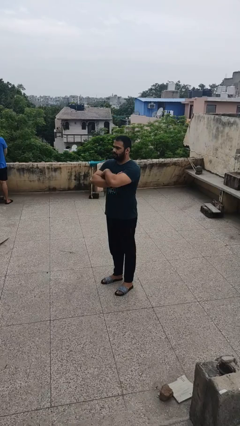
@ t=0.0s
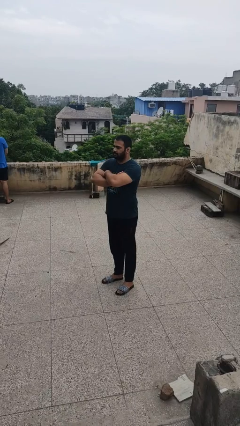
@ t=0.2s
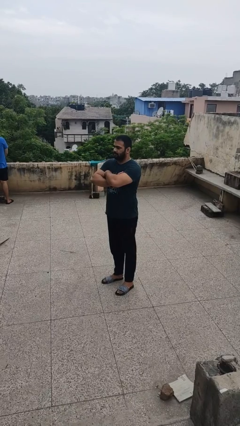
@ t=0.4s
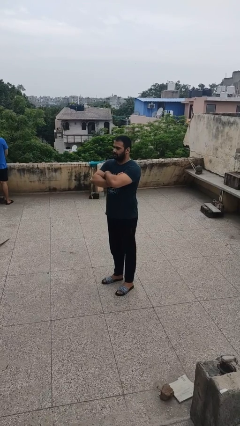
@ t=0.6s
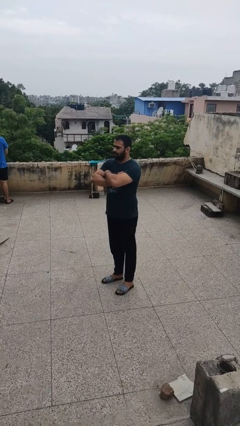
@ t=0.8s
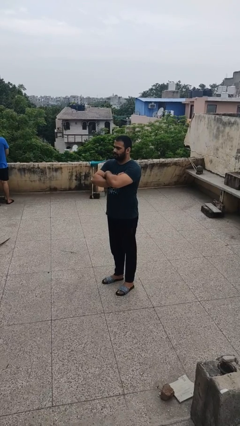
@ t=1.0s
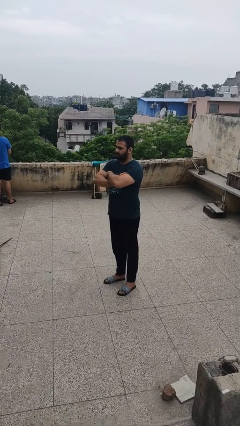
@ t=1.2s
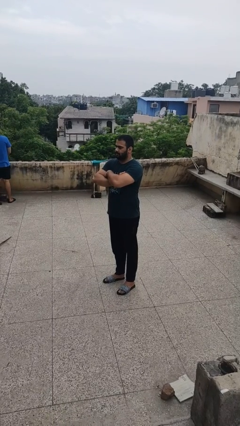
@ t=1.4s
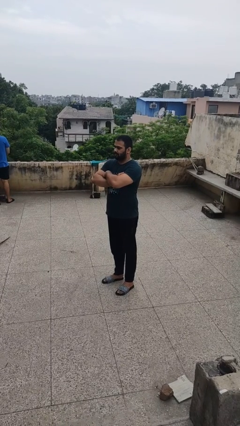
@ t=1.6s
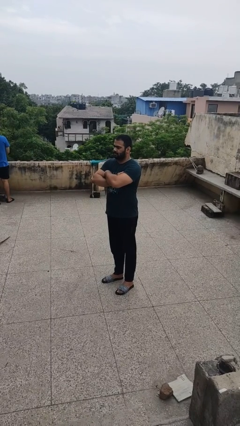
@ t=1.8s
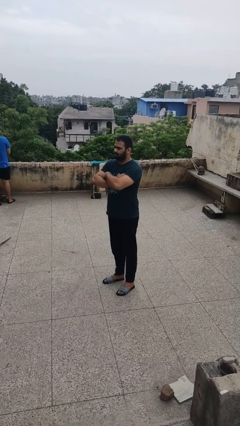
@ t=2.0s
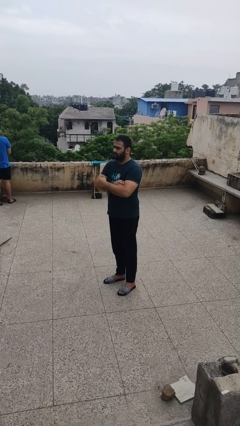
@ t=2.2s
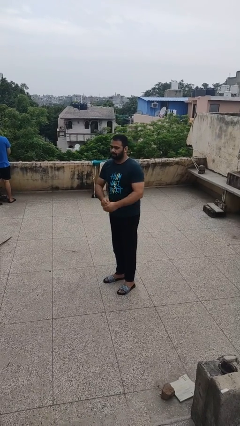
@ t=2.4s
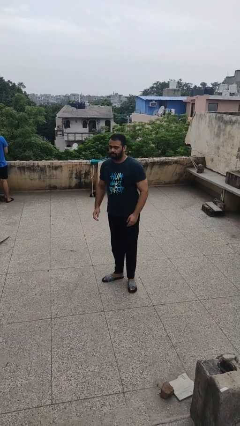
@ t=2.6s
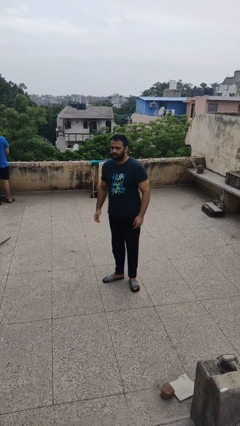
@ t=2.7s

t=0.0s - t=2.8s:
person crosses arms

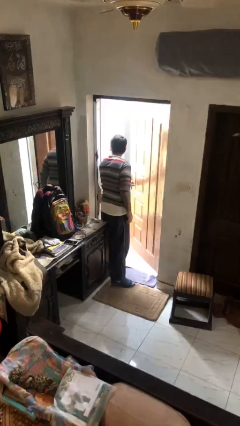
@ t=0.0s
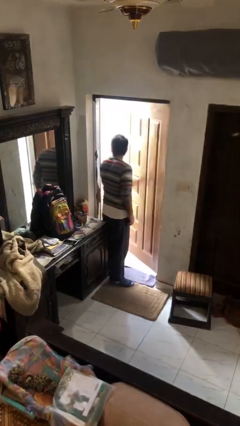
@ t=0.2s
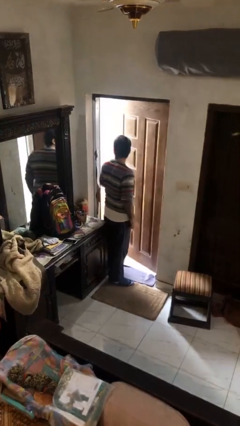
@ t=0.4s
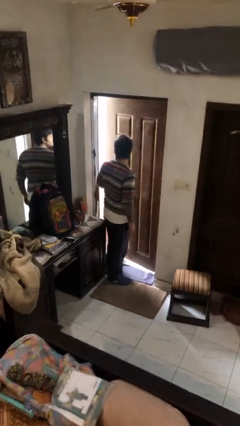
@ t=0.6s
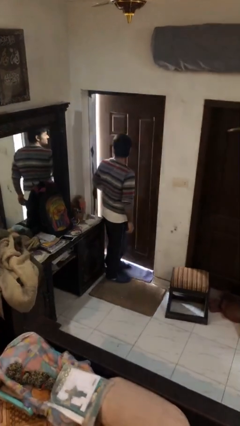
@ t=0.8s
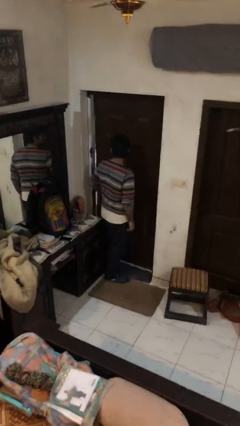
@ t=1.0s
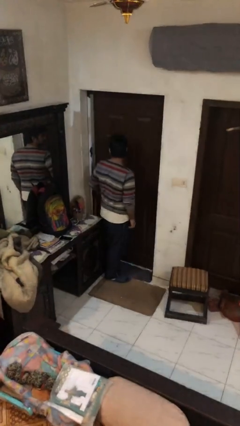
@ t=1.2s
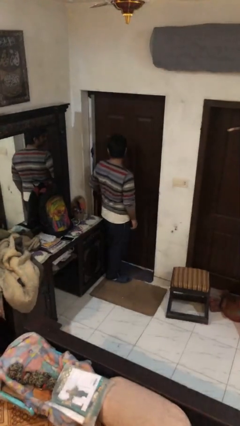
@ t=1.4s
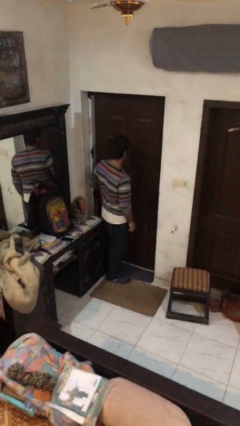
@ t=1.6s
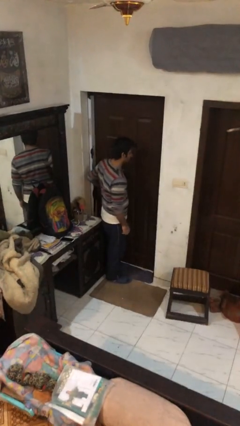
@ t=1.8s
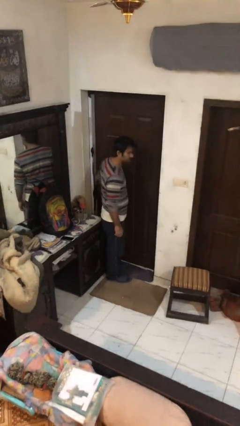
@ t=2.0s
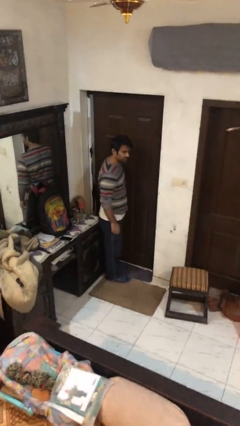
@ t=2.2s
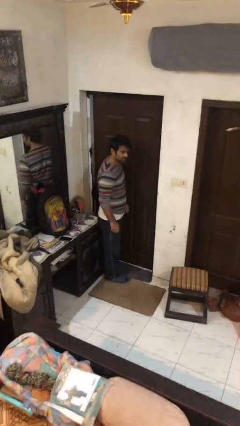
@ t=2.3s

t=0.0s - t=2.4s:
person closes facility door

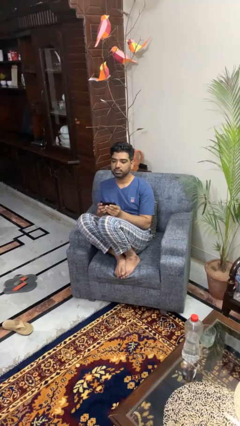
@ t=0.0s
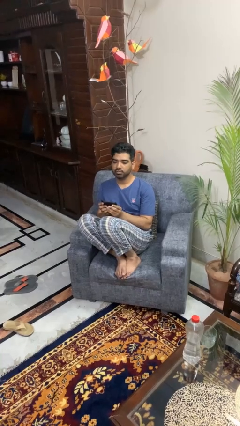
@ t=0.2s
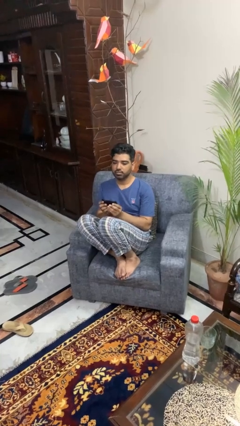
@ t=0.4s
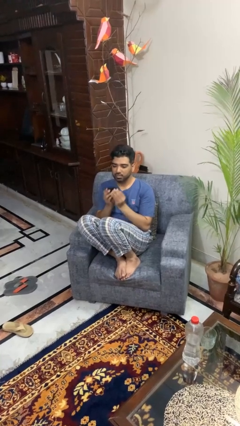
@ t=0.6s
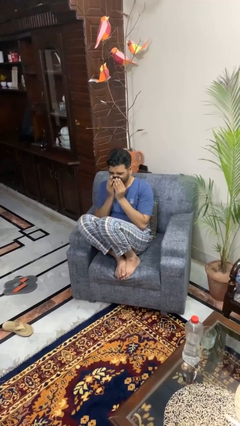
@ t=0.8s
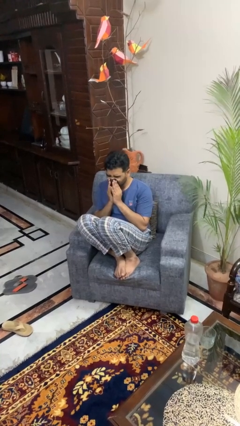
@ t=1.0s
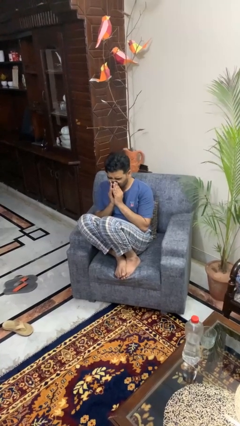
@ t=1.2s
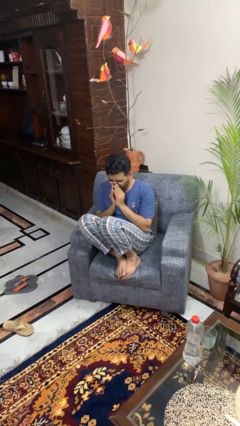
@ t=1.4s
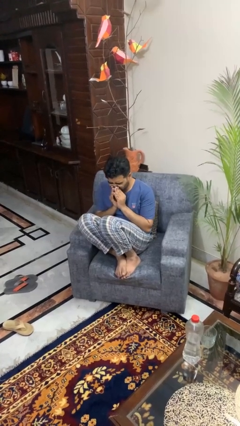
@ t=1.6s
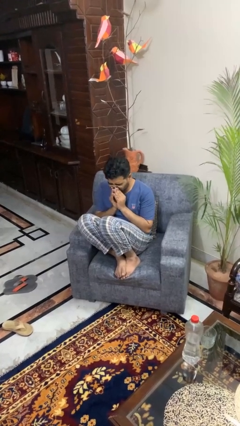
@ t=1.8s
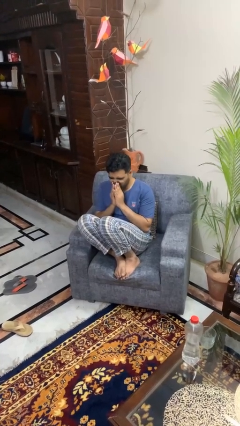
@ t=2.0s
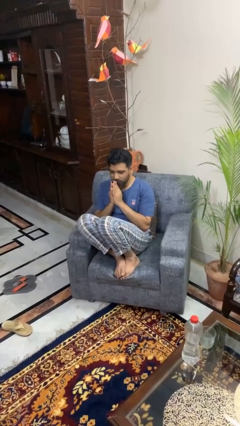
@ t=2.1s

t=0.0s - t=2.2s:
person blows nose

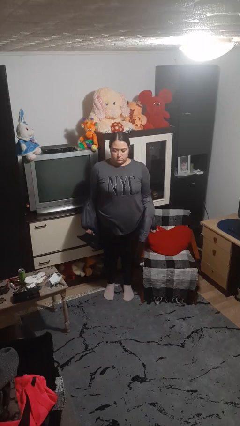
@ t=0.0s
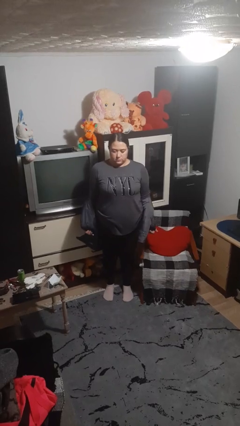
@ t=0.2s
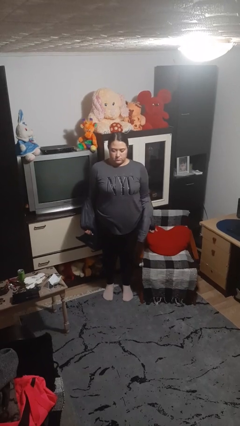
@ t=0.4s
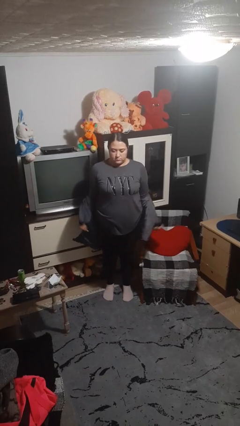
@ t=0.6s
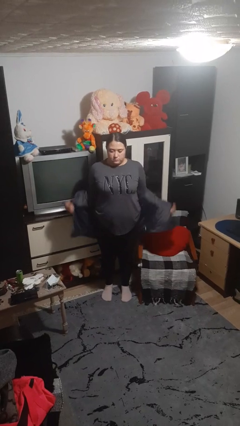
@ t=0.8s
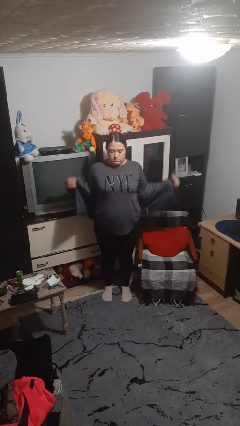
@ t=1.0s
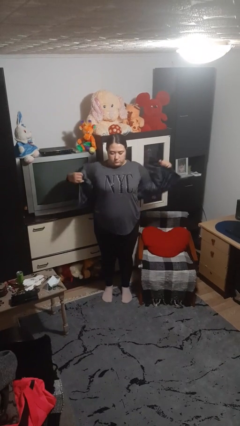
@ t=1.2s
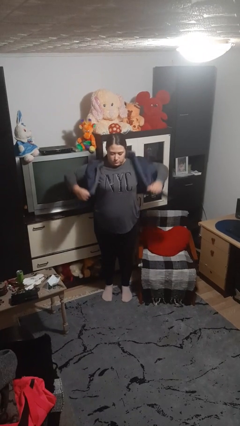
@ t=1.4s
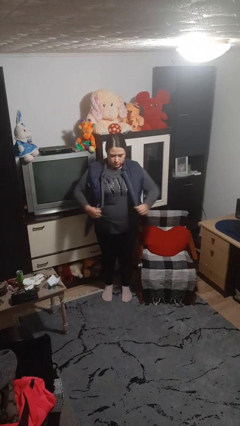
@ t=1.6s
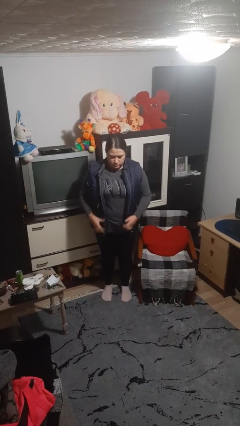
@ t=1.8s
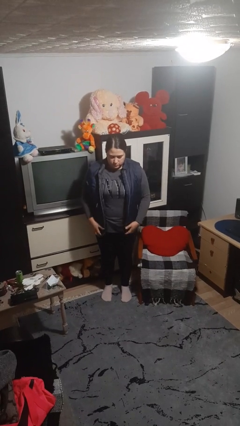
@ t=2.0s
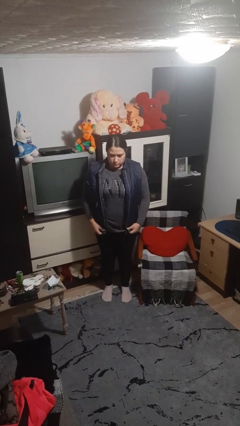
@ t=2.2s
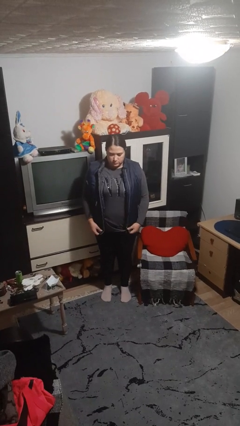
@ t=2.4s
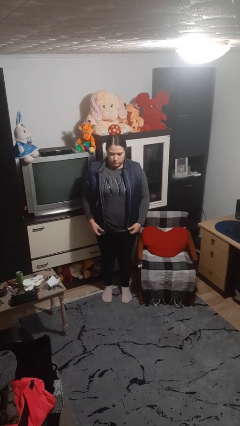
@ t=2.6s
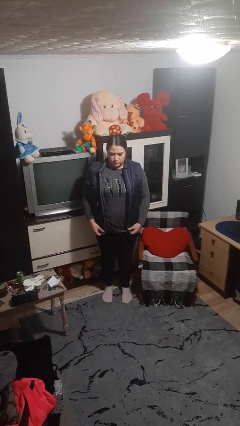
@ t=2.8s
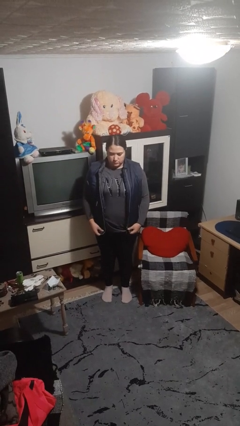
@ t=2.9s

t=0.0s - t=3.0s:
person puts on jacket

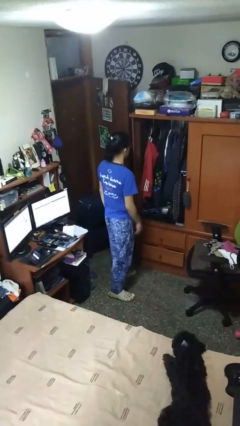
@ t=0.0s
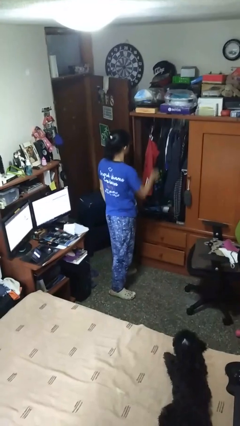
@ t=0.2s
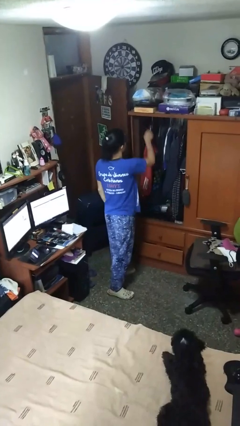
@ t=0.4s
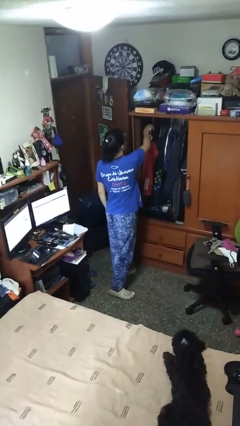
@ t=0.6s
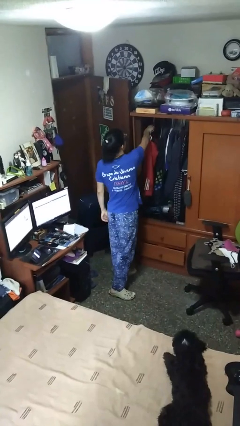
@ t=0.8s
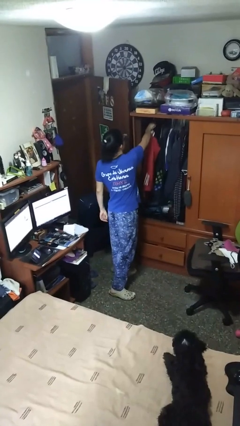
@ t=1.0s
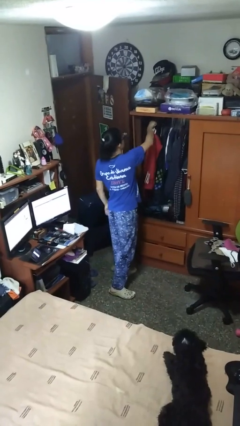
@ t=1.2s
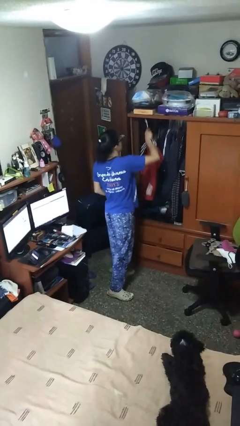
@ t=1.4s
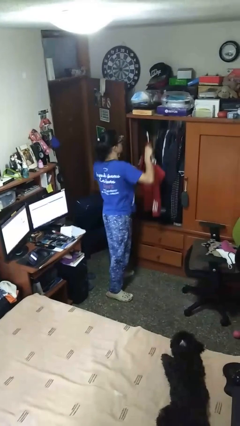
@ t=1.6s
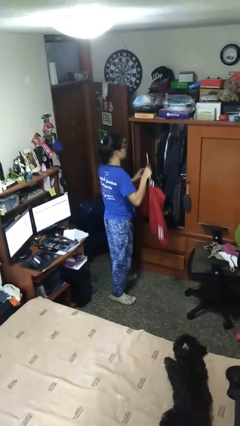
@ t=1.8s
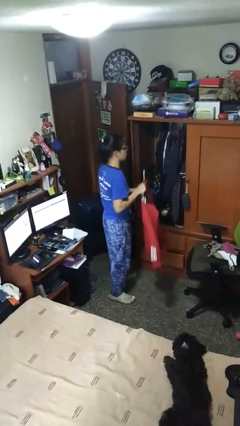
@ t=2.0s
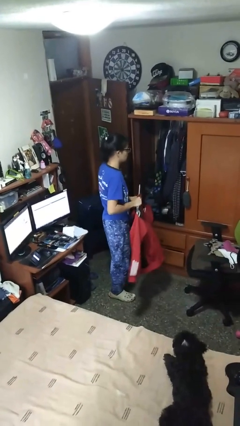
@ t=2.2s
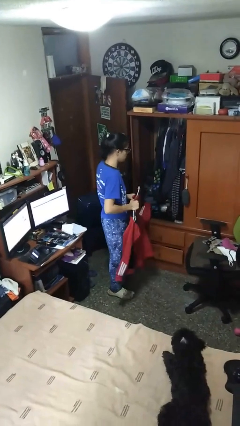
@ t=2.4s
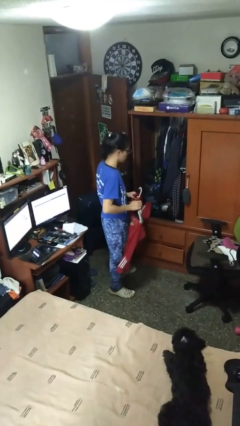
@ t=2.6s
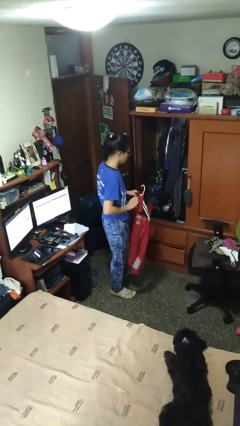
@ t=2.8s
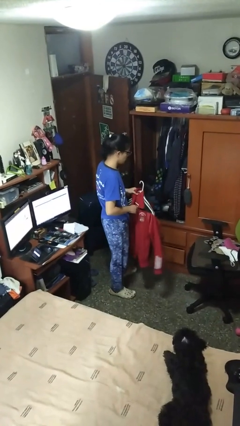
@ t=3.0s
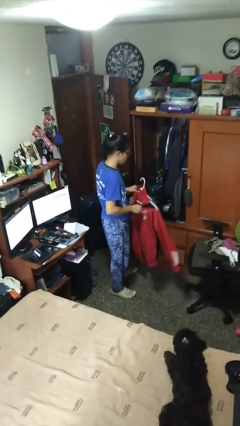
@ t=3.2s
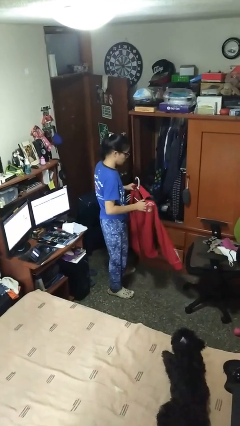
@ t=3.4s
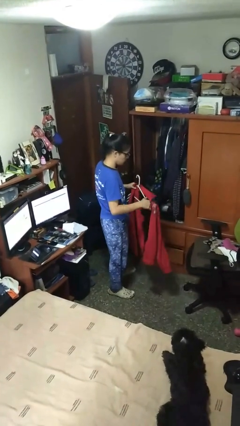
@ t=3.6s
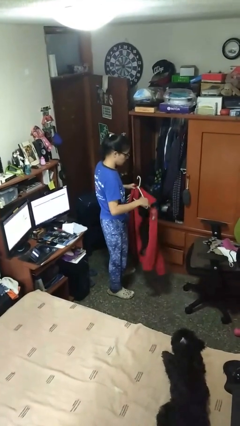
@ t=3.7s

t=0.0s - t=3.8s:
person takes clothes from closet

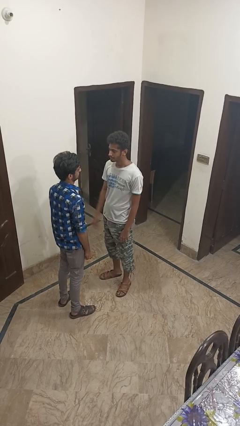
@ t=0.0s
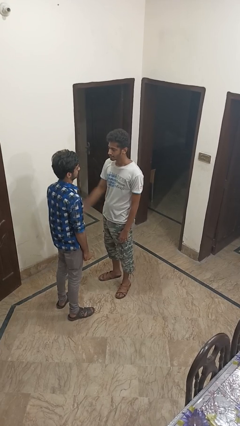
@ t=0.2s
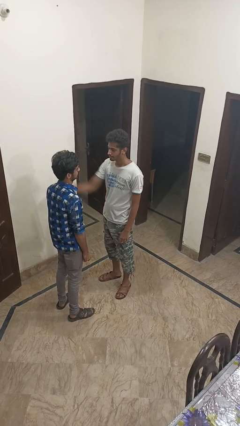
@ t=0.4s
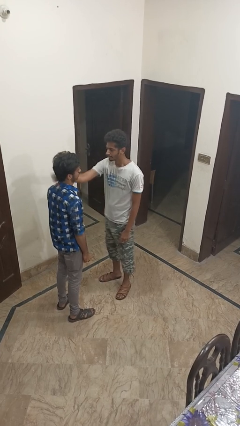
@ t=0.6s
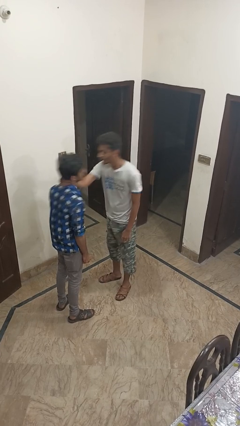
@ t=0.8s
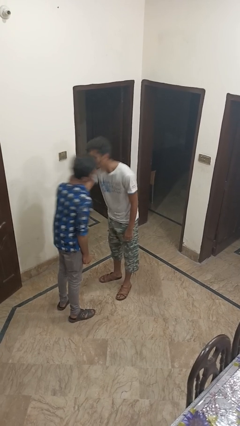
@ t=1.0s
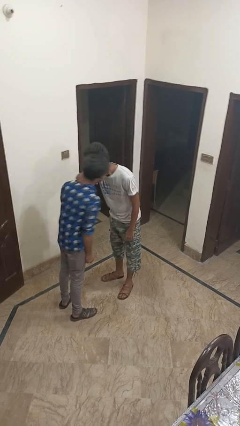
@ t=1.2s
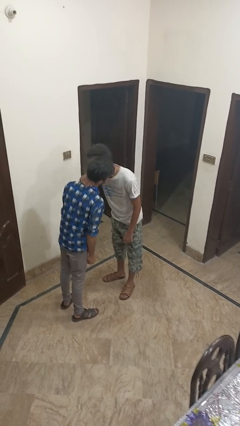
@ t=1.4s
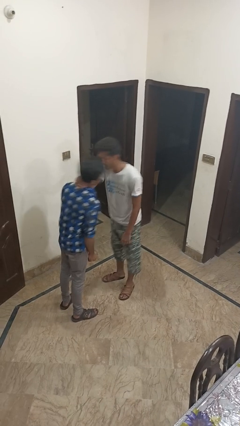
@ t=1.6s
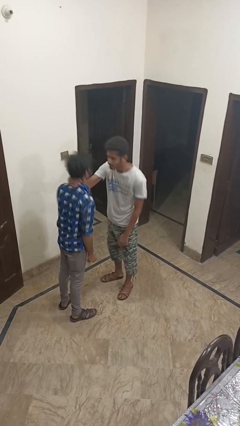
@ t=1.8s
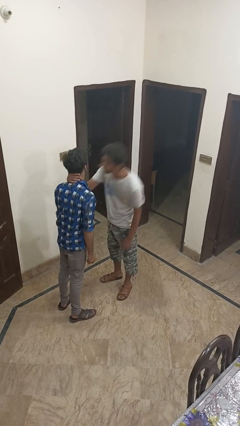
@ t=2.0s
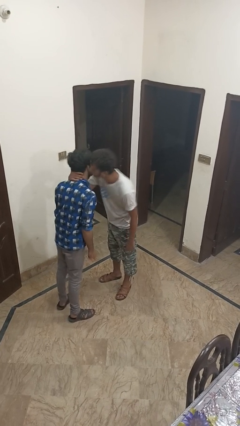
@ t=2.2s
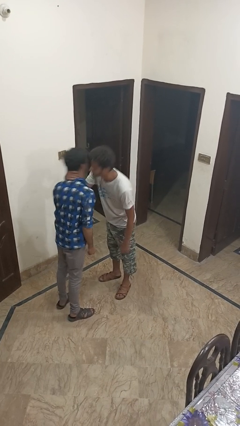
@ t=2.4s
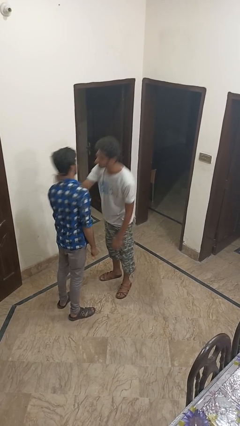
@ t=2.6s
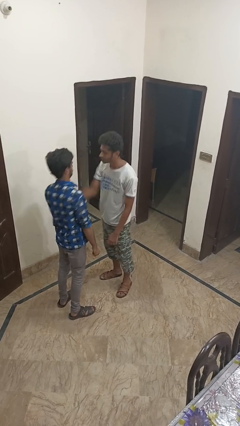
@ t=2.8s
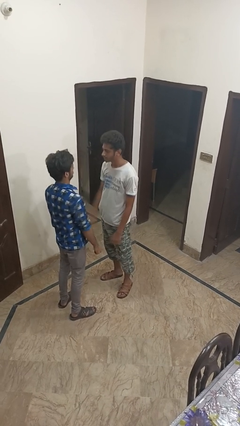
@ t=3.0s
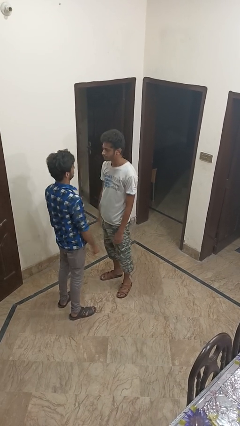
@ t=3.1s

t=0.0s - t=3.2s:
person kisses cheek of person
